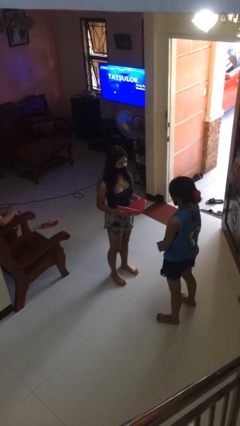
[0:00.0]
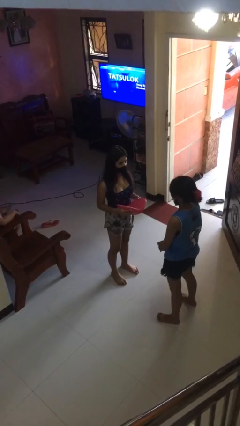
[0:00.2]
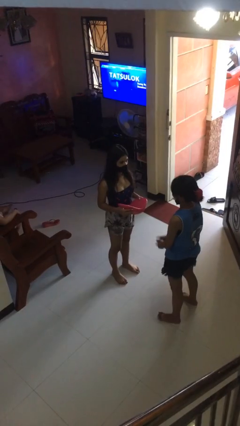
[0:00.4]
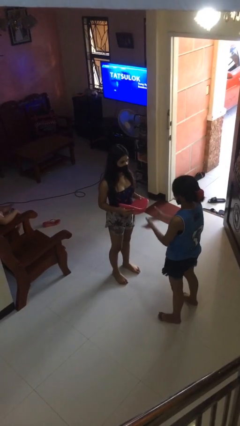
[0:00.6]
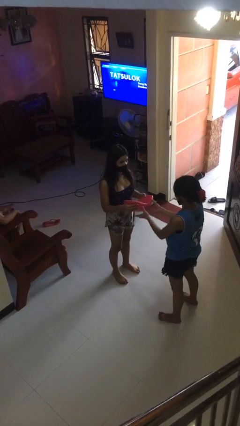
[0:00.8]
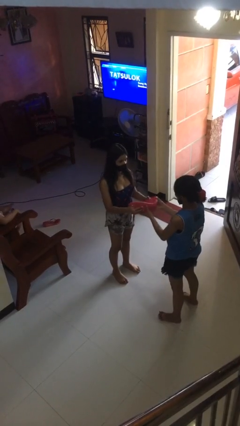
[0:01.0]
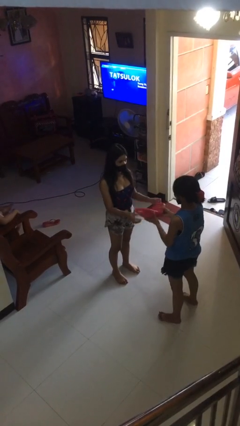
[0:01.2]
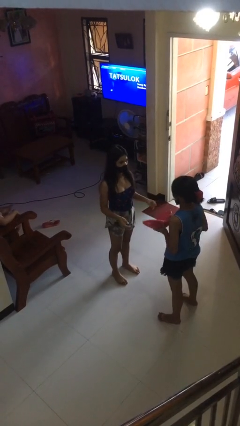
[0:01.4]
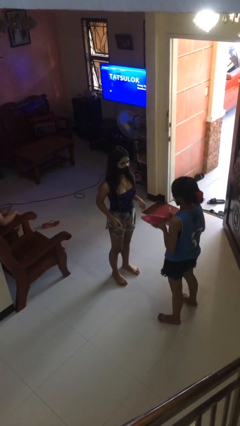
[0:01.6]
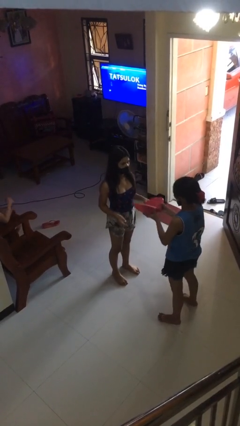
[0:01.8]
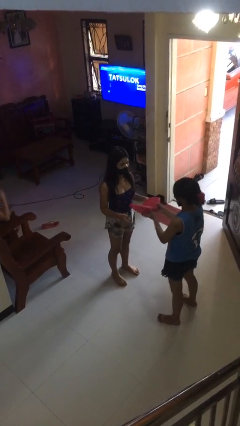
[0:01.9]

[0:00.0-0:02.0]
person transfers object to person

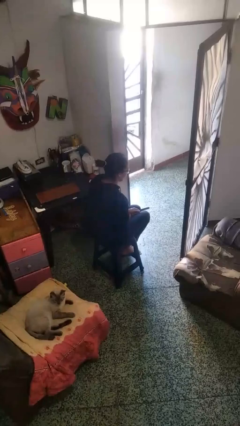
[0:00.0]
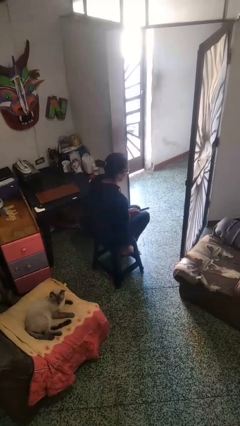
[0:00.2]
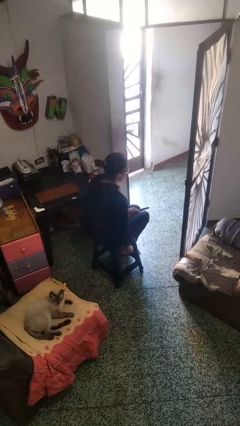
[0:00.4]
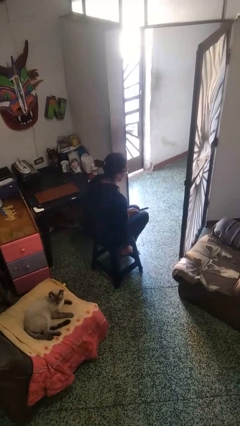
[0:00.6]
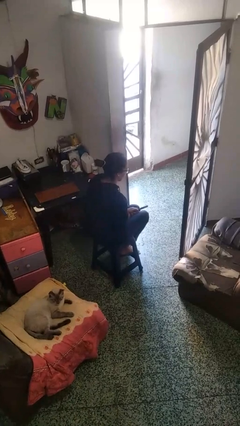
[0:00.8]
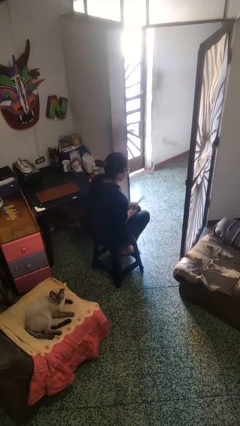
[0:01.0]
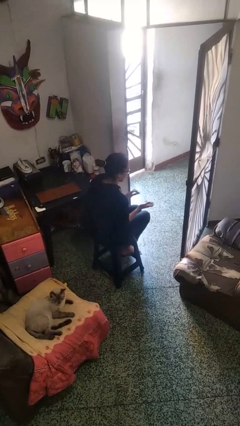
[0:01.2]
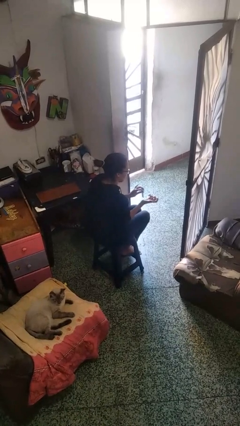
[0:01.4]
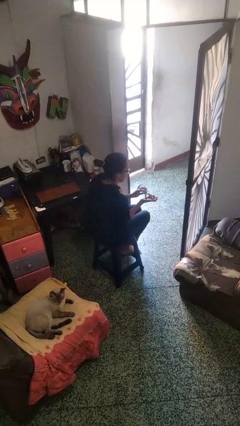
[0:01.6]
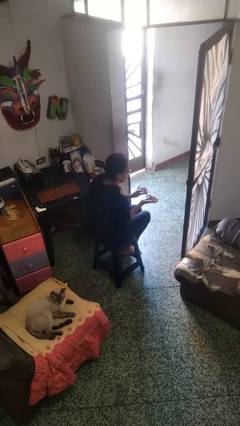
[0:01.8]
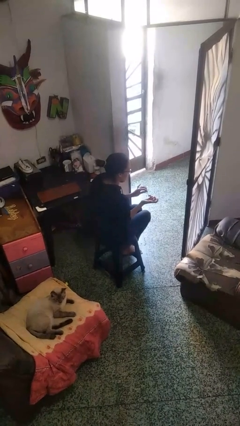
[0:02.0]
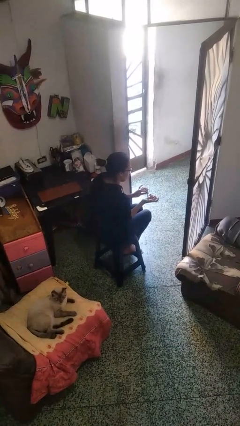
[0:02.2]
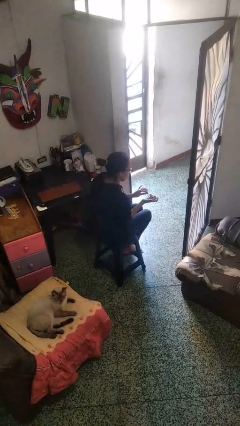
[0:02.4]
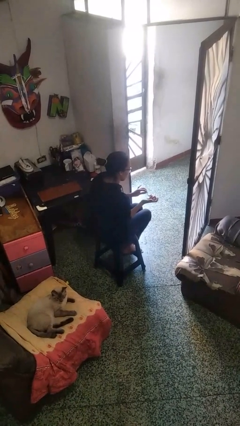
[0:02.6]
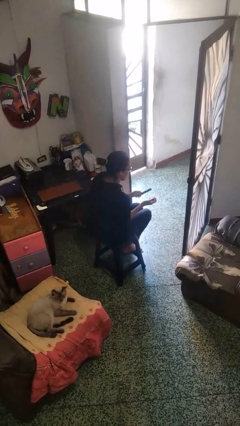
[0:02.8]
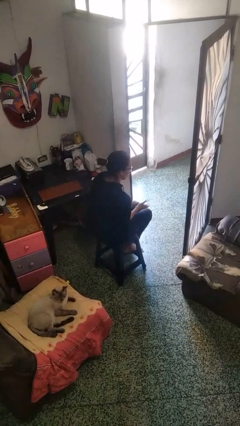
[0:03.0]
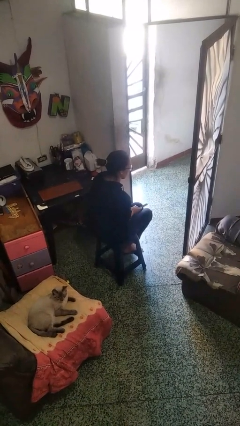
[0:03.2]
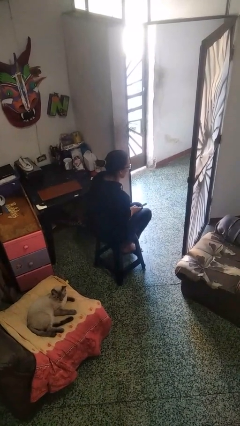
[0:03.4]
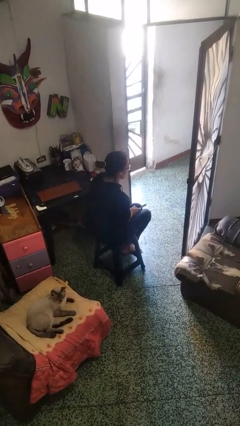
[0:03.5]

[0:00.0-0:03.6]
person files fingernails

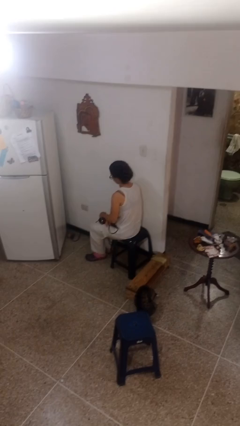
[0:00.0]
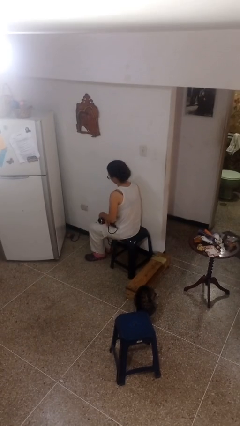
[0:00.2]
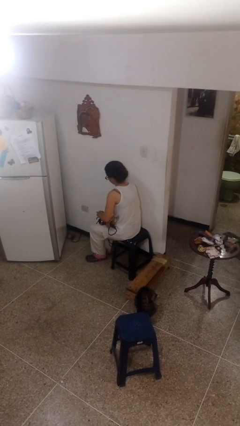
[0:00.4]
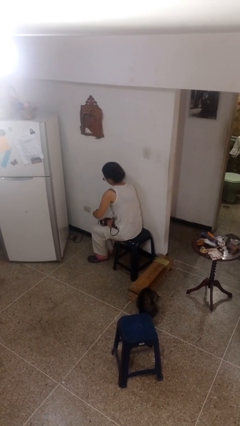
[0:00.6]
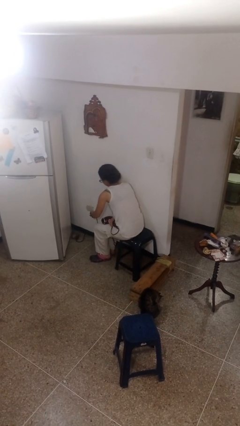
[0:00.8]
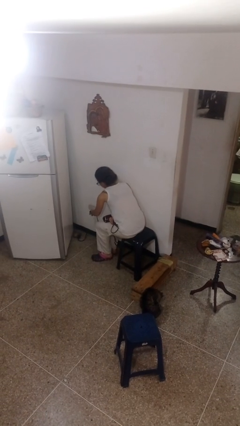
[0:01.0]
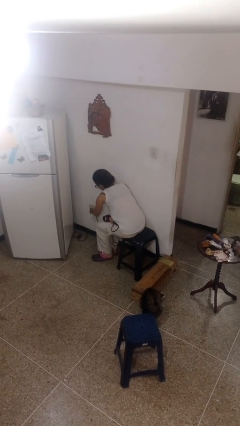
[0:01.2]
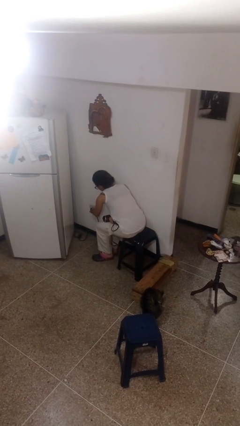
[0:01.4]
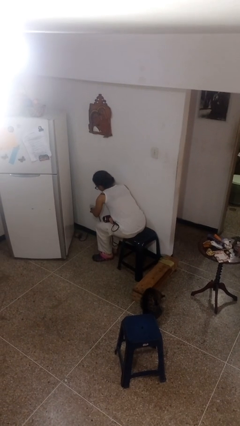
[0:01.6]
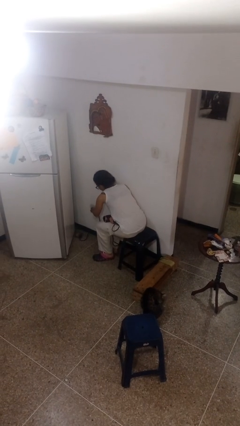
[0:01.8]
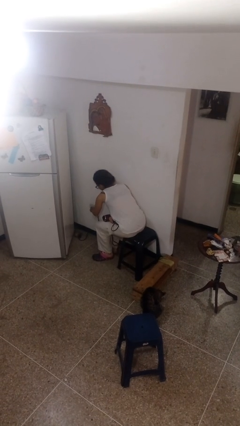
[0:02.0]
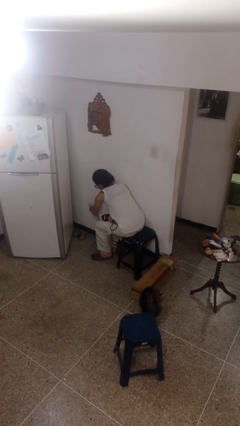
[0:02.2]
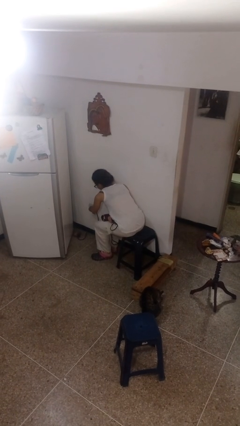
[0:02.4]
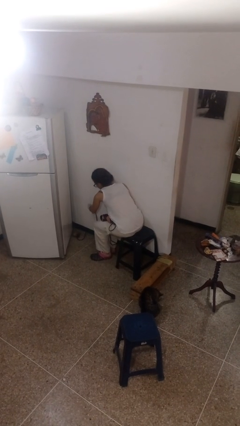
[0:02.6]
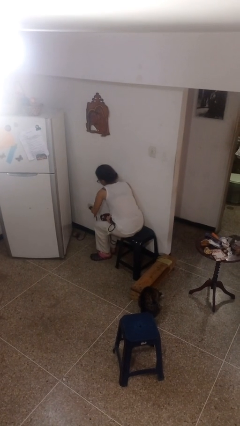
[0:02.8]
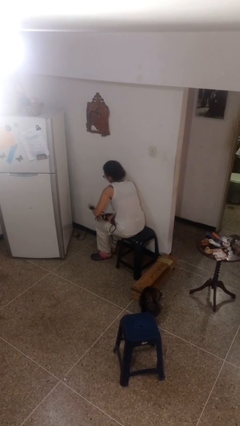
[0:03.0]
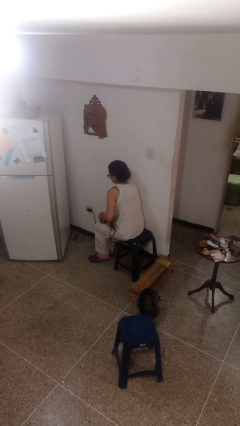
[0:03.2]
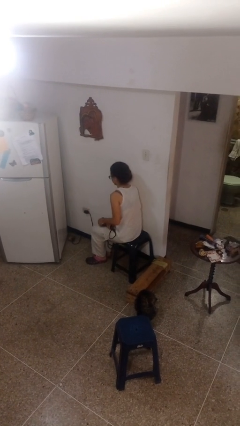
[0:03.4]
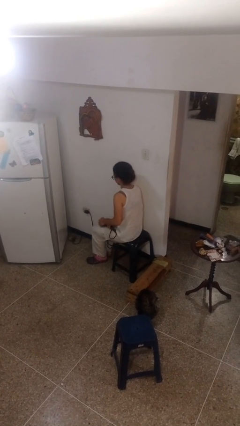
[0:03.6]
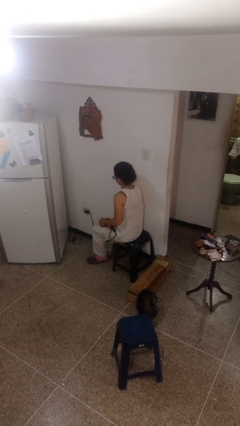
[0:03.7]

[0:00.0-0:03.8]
person plugs into electrical socket

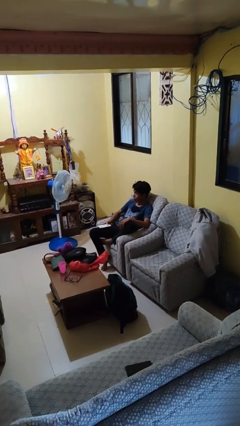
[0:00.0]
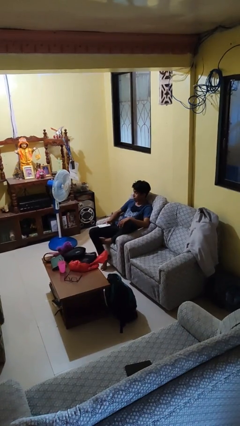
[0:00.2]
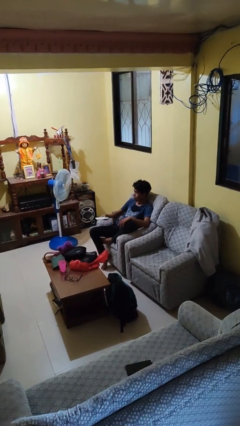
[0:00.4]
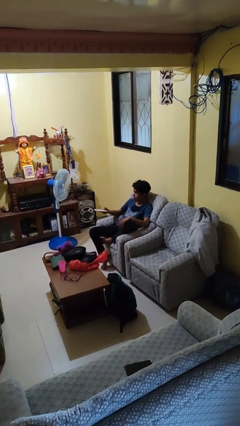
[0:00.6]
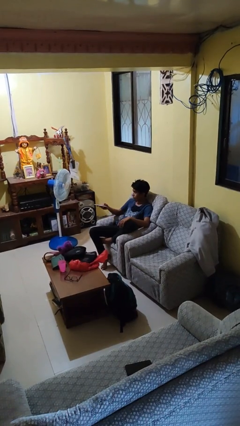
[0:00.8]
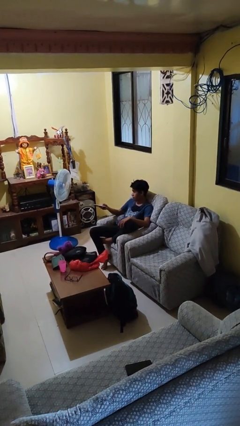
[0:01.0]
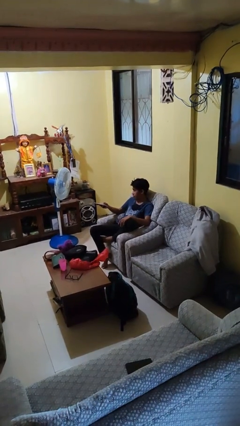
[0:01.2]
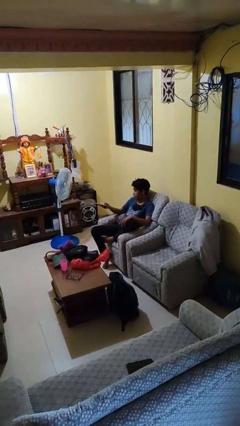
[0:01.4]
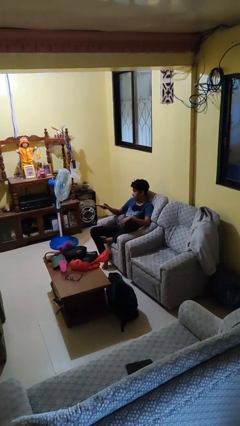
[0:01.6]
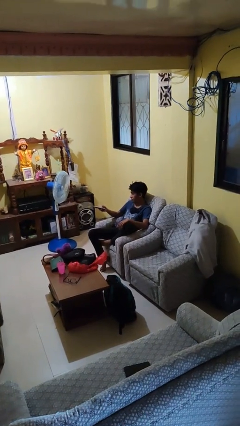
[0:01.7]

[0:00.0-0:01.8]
person uses television remote

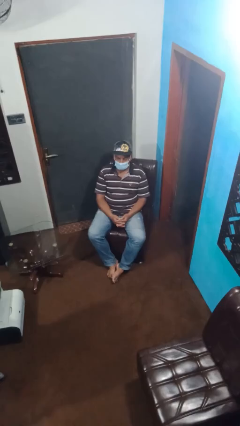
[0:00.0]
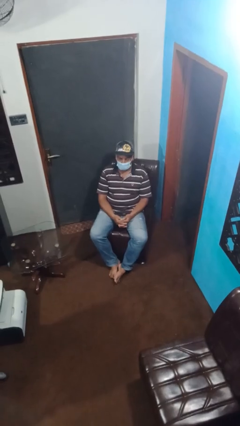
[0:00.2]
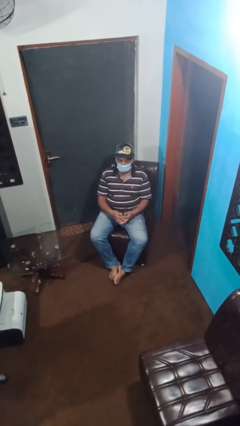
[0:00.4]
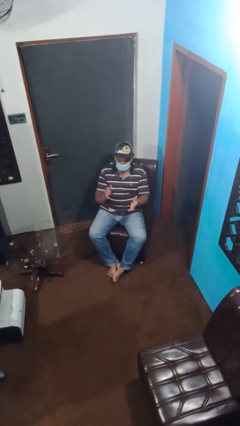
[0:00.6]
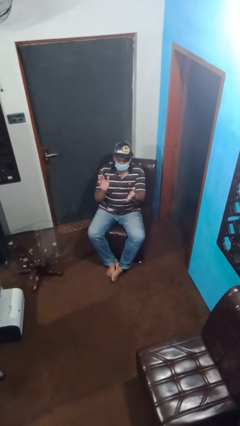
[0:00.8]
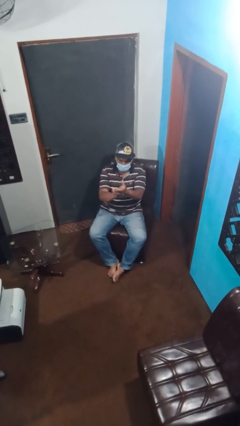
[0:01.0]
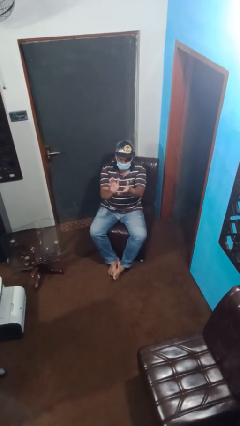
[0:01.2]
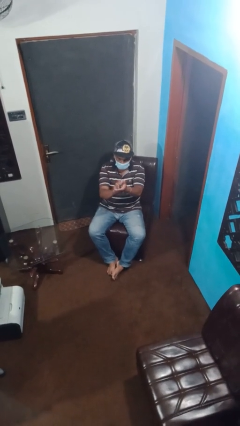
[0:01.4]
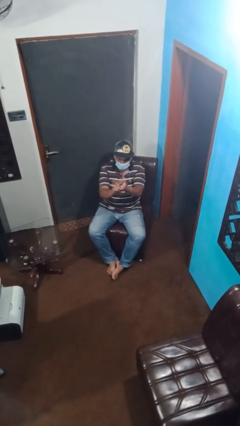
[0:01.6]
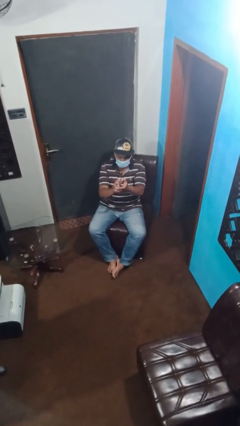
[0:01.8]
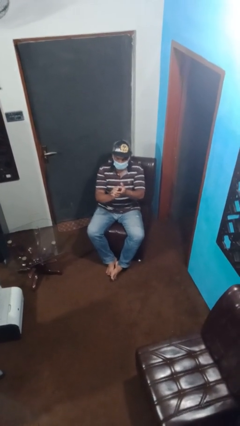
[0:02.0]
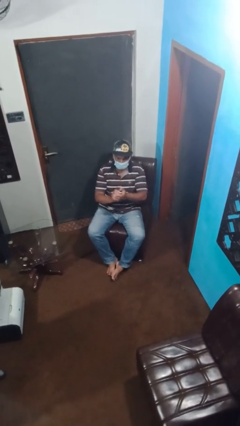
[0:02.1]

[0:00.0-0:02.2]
person claps hands

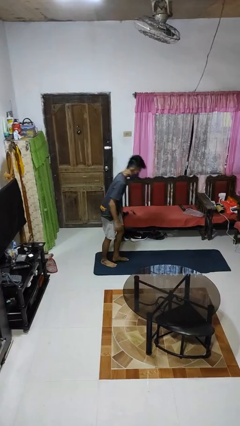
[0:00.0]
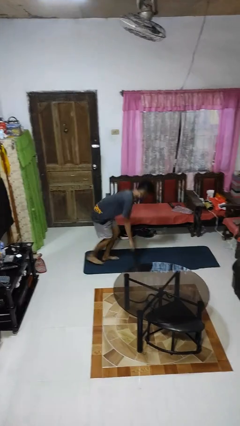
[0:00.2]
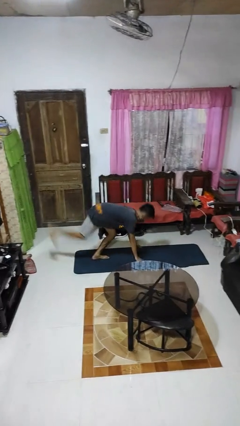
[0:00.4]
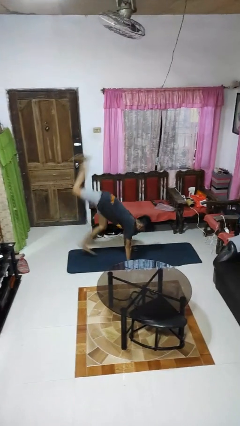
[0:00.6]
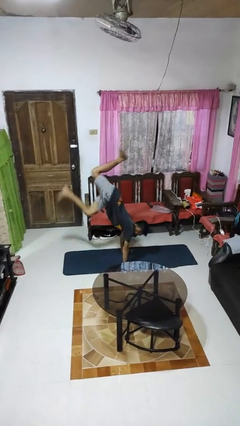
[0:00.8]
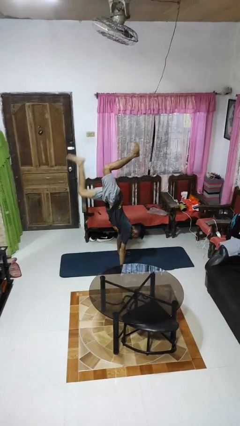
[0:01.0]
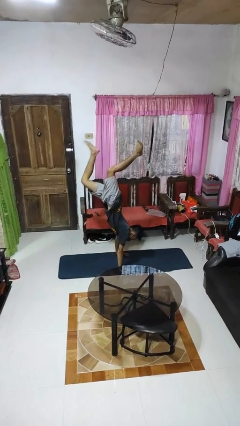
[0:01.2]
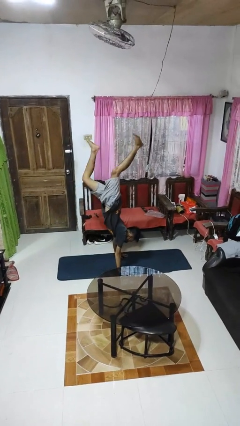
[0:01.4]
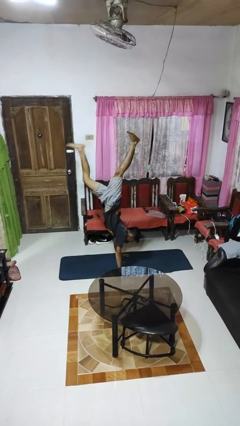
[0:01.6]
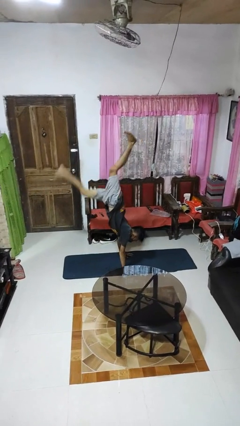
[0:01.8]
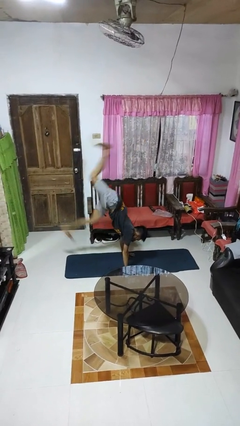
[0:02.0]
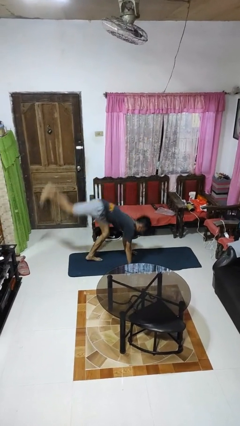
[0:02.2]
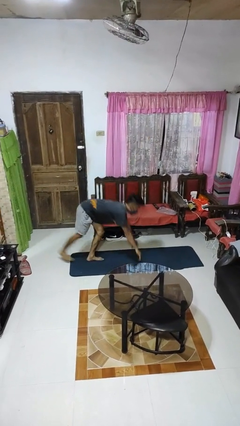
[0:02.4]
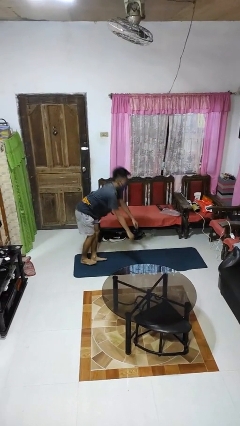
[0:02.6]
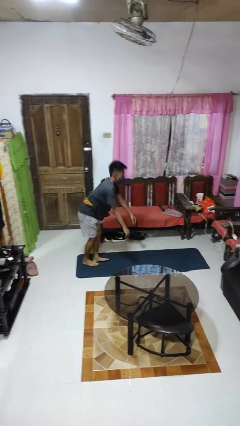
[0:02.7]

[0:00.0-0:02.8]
person handstand

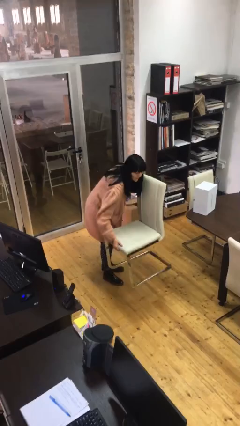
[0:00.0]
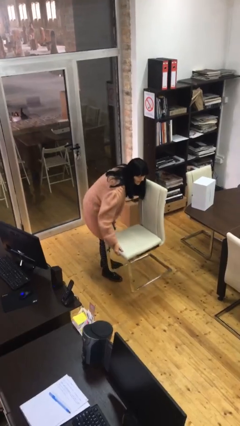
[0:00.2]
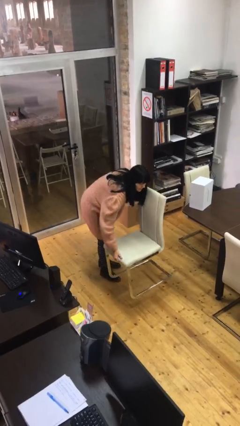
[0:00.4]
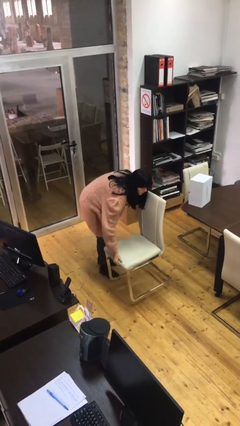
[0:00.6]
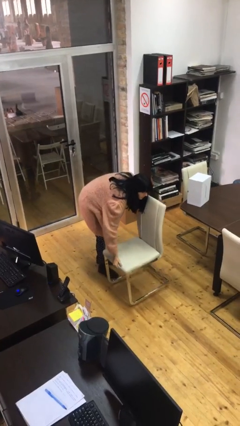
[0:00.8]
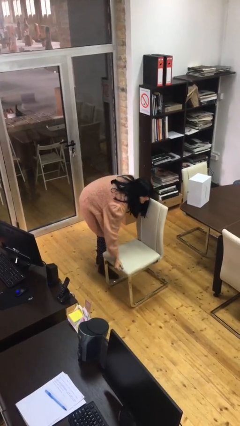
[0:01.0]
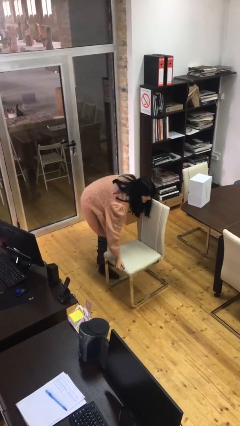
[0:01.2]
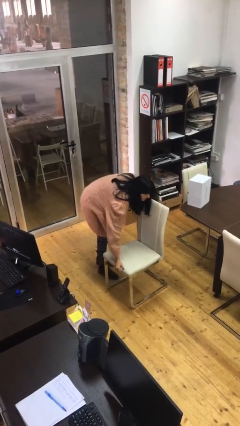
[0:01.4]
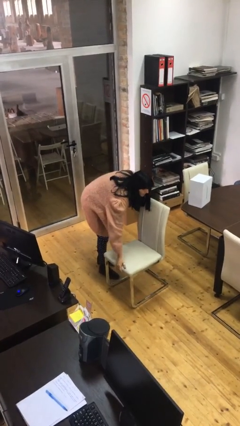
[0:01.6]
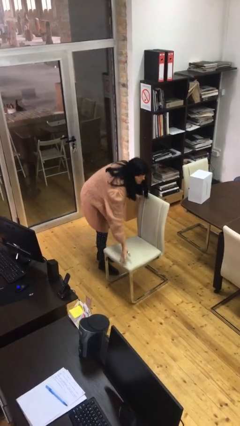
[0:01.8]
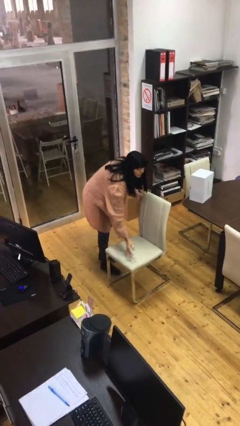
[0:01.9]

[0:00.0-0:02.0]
person puts down object on floor
